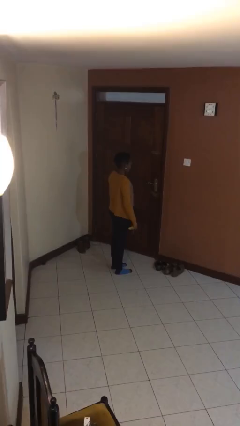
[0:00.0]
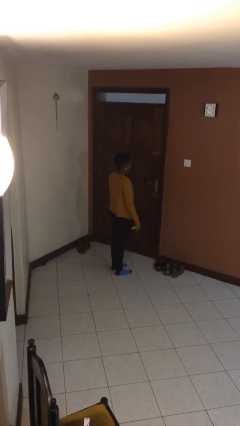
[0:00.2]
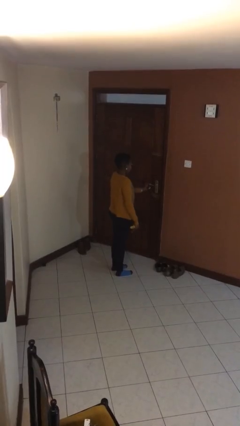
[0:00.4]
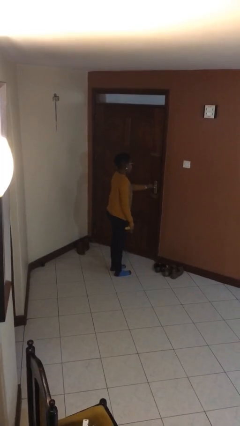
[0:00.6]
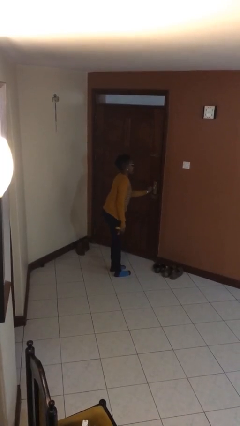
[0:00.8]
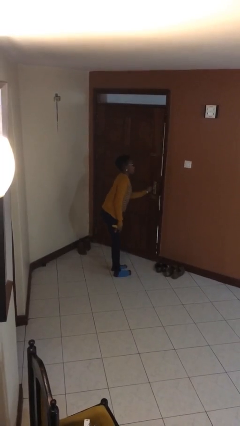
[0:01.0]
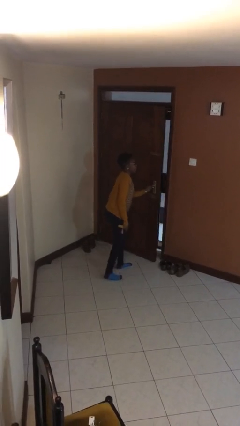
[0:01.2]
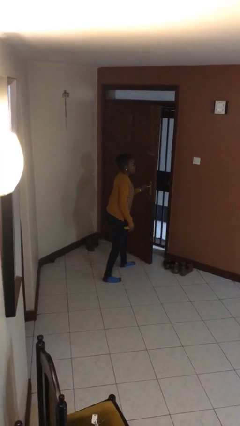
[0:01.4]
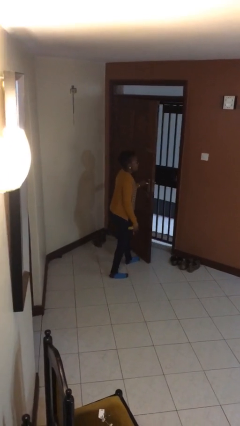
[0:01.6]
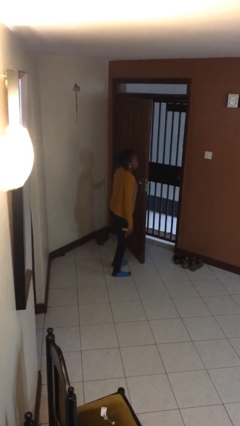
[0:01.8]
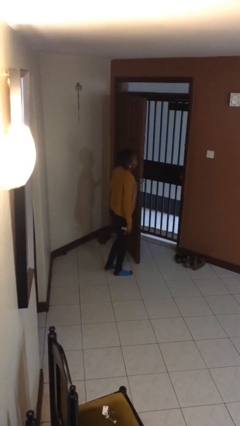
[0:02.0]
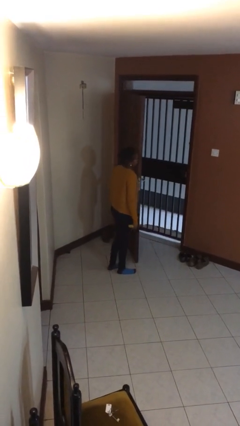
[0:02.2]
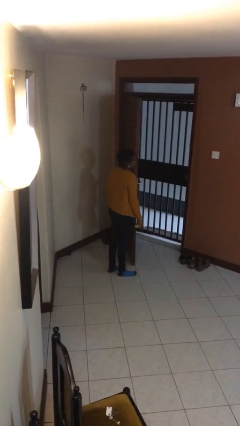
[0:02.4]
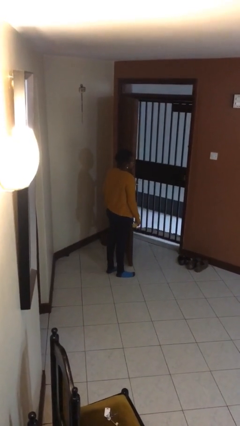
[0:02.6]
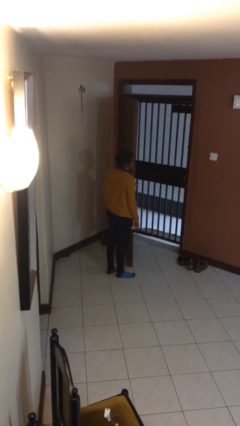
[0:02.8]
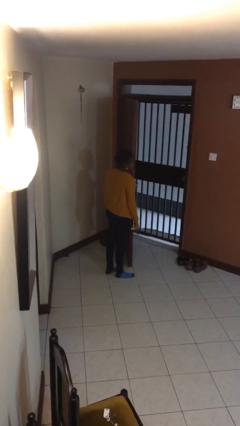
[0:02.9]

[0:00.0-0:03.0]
person opens facility door

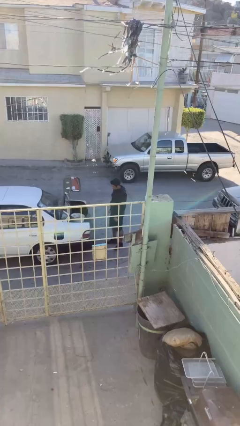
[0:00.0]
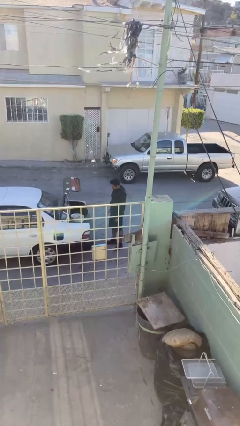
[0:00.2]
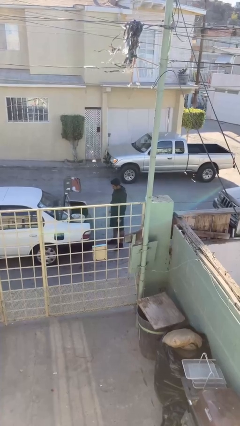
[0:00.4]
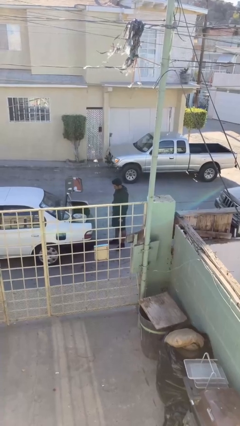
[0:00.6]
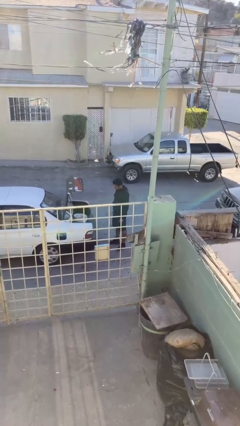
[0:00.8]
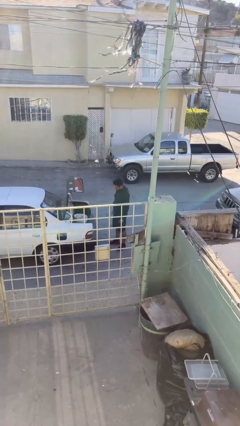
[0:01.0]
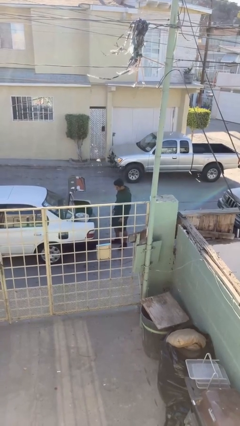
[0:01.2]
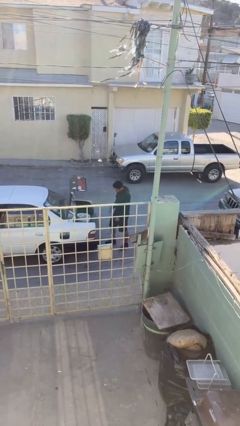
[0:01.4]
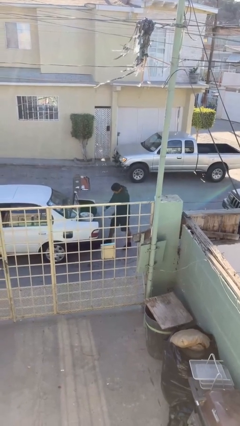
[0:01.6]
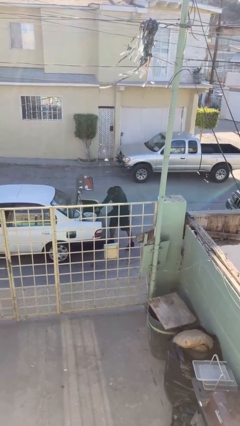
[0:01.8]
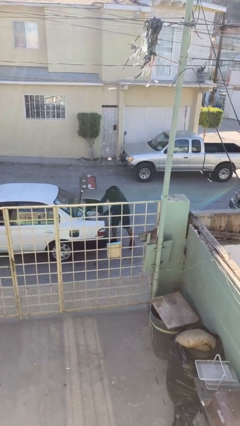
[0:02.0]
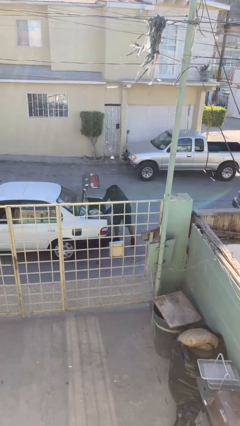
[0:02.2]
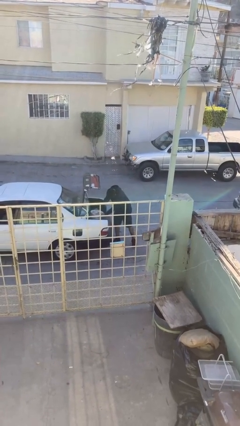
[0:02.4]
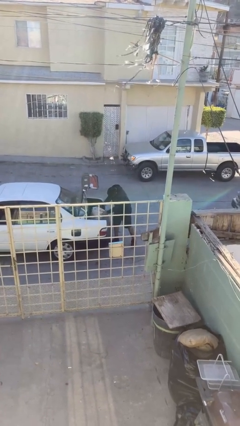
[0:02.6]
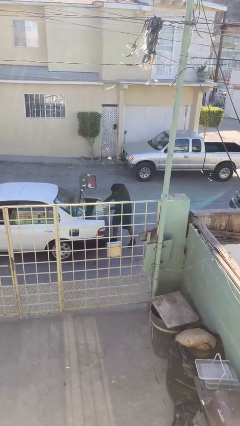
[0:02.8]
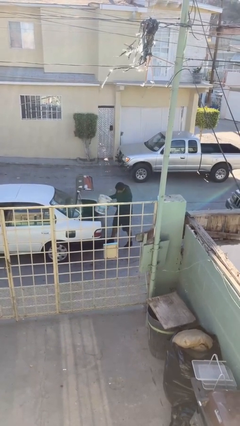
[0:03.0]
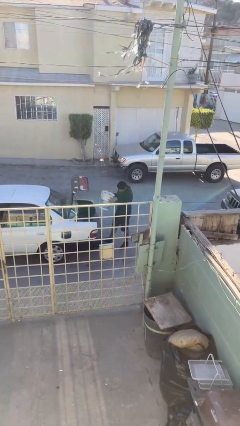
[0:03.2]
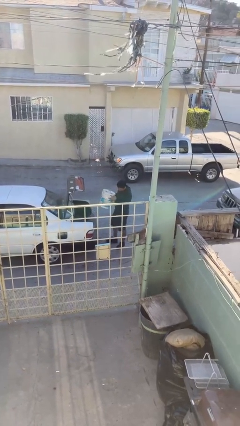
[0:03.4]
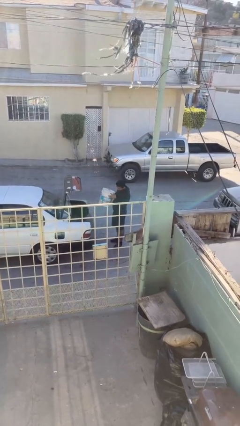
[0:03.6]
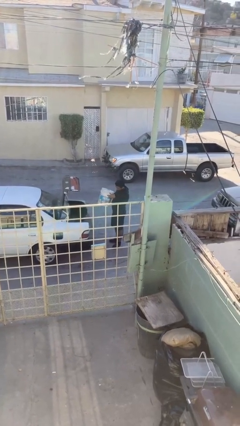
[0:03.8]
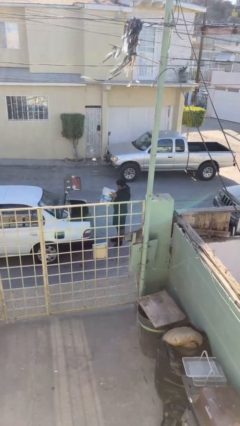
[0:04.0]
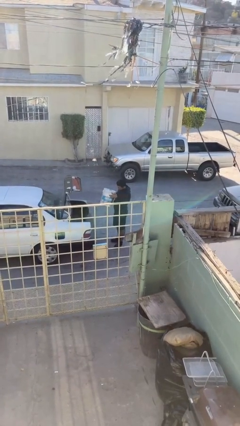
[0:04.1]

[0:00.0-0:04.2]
person unloads car

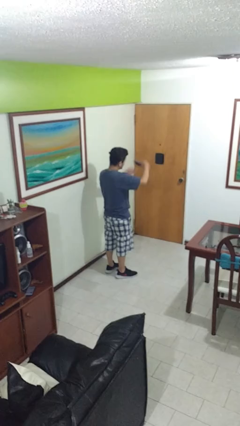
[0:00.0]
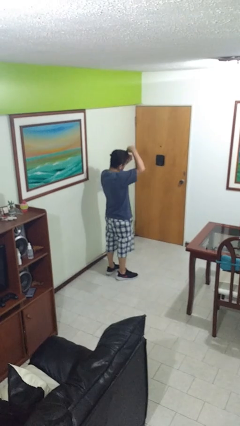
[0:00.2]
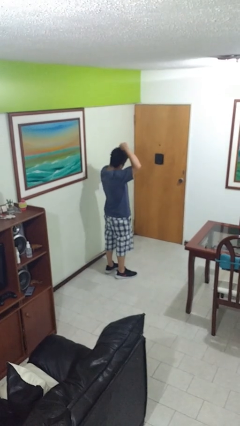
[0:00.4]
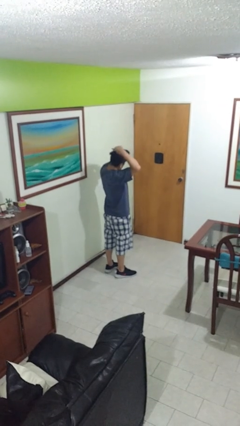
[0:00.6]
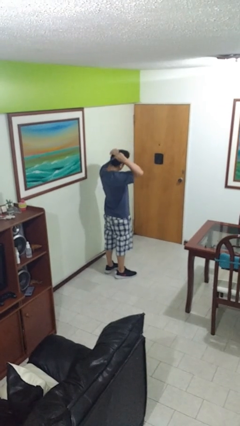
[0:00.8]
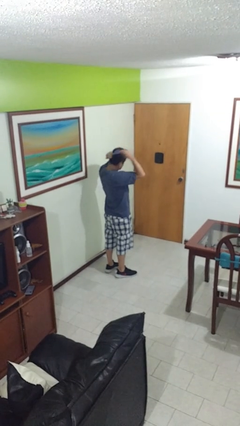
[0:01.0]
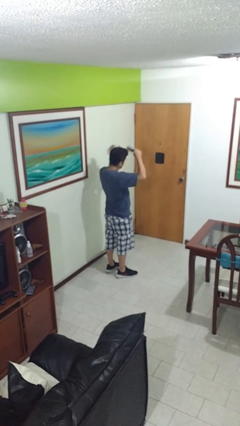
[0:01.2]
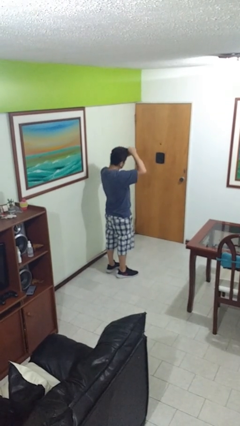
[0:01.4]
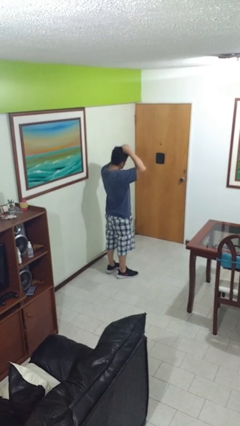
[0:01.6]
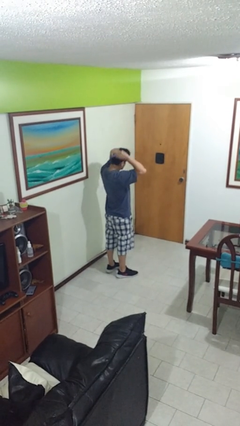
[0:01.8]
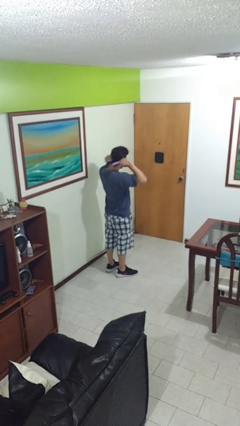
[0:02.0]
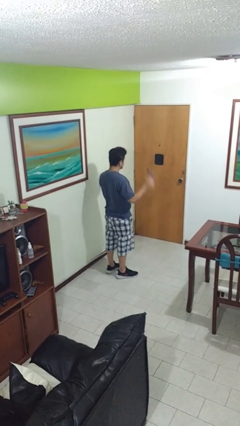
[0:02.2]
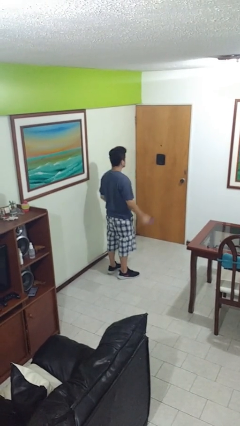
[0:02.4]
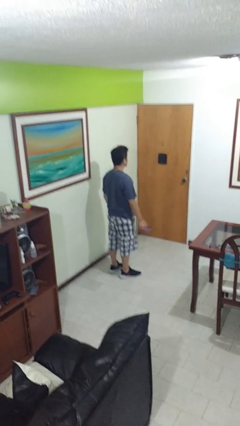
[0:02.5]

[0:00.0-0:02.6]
person brushes hair

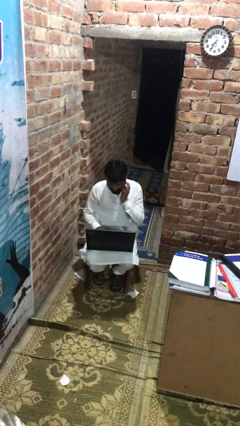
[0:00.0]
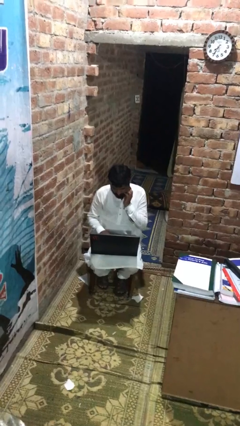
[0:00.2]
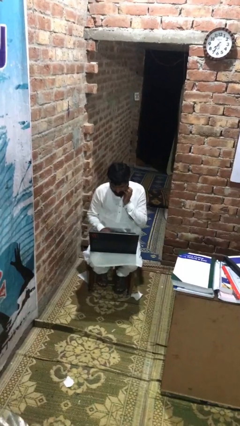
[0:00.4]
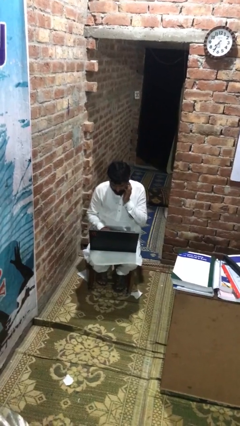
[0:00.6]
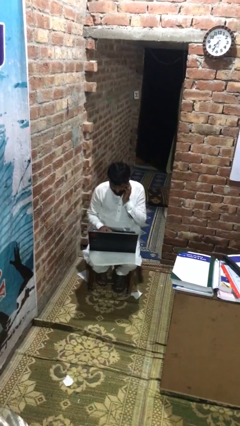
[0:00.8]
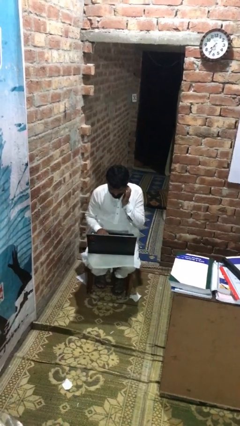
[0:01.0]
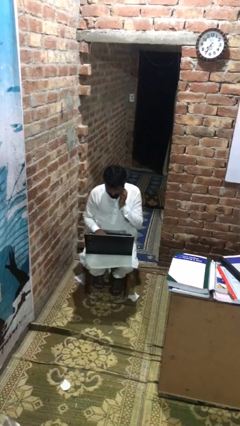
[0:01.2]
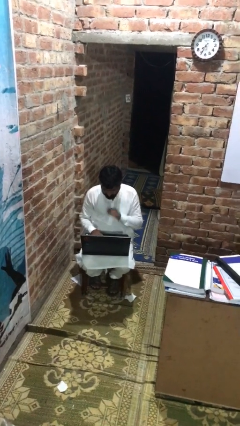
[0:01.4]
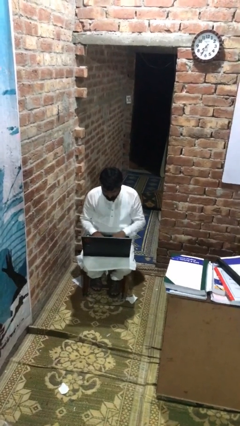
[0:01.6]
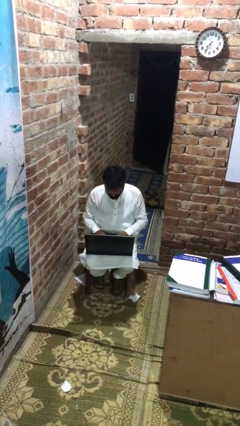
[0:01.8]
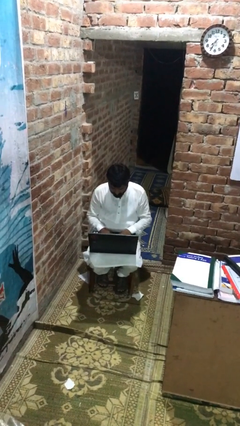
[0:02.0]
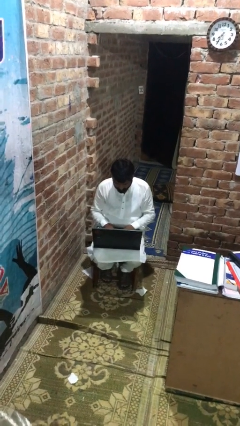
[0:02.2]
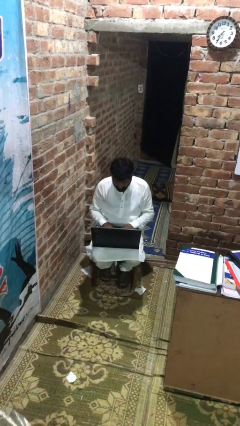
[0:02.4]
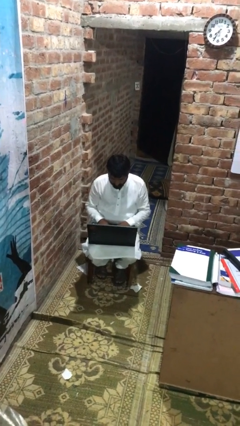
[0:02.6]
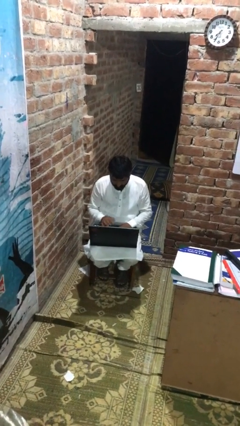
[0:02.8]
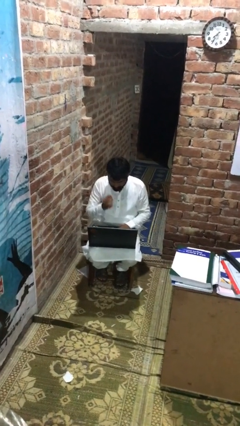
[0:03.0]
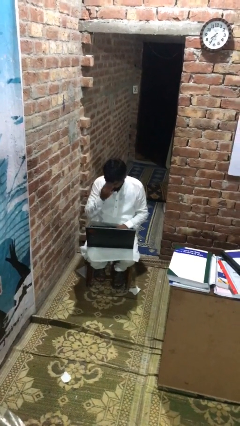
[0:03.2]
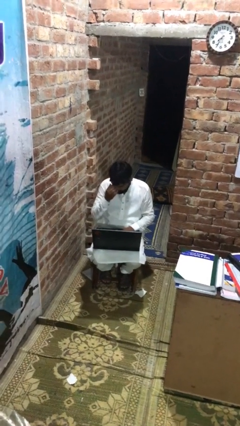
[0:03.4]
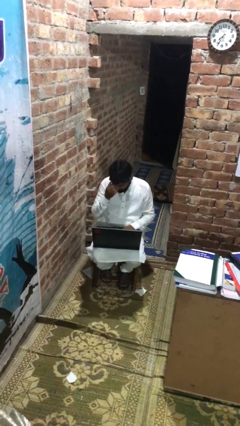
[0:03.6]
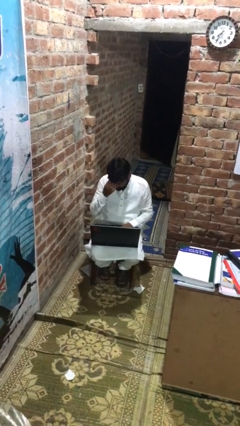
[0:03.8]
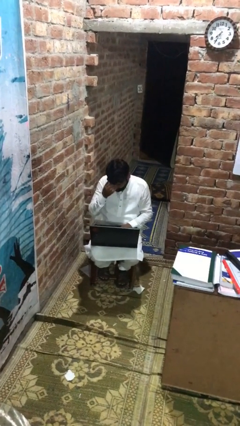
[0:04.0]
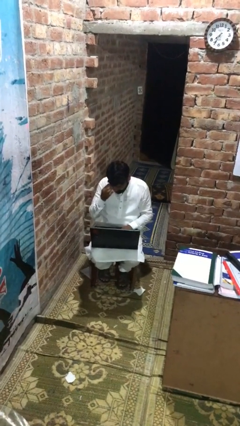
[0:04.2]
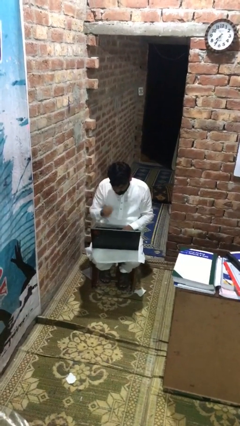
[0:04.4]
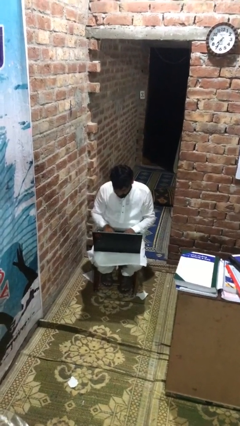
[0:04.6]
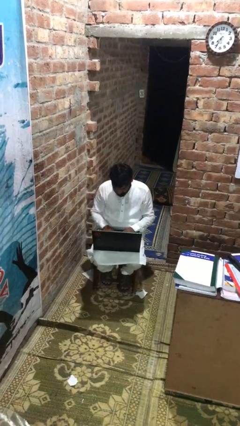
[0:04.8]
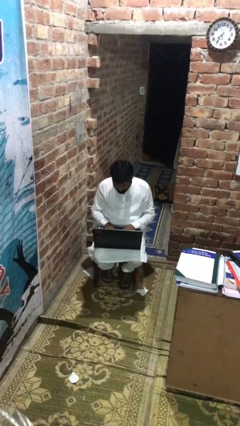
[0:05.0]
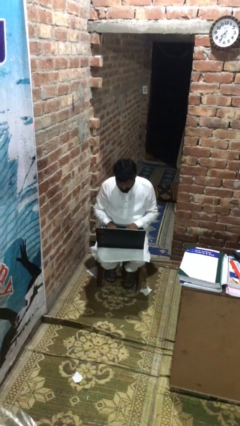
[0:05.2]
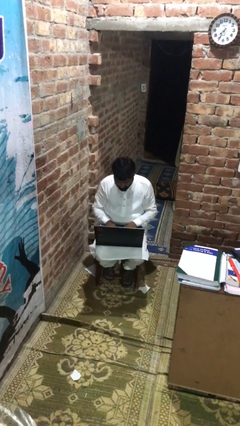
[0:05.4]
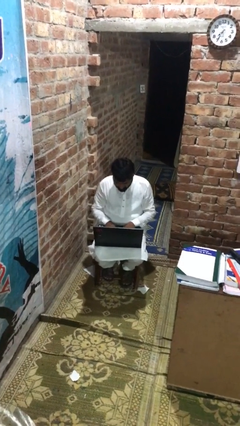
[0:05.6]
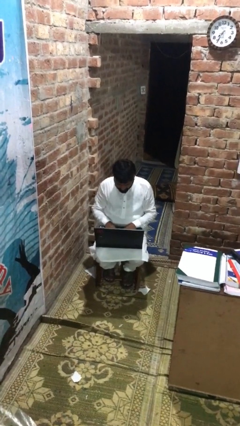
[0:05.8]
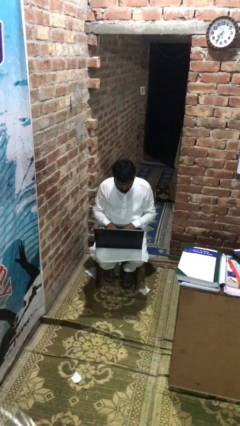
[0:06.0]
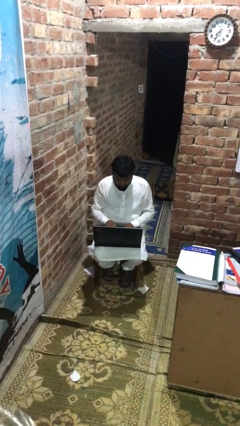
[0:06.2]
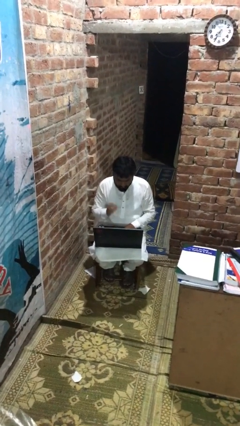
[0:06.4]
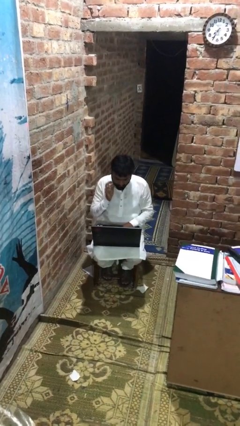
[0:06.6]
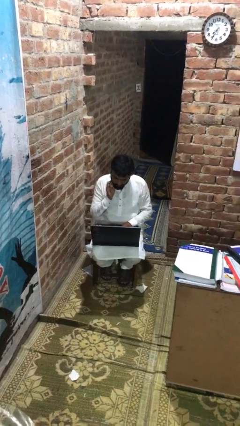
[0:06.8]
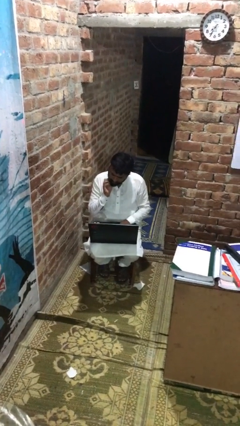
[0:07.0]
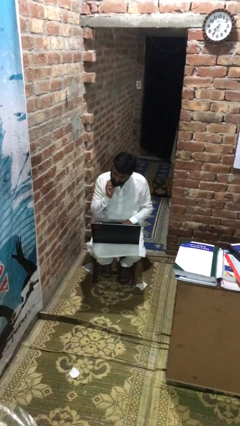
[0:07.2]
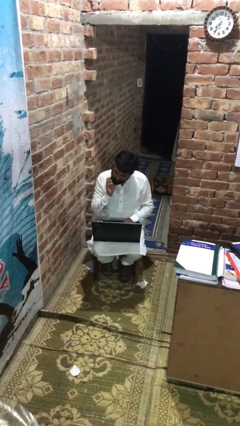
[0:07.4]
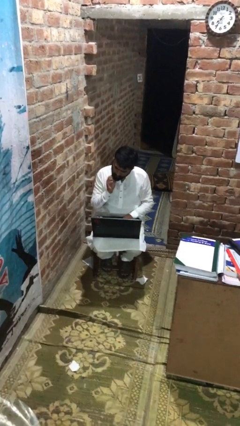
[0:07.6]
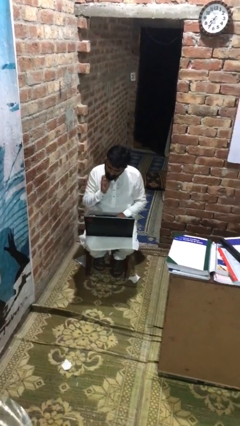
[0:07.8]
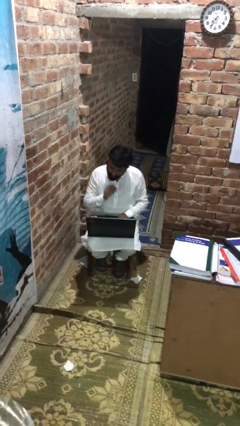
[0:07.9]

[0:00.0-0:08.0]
person interacts with laptop

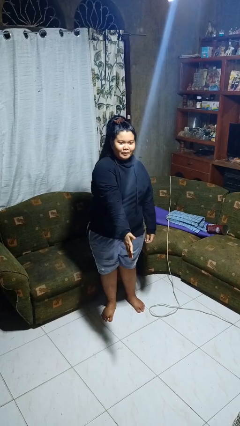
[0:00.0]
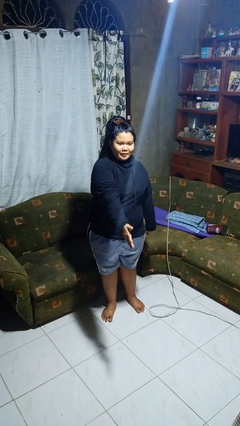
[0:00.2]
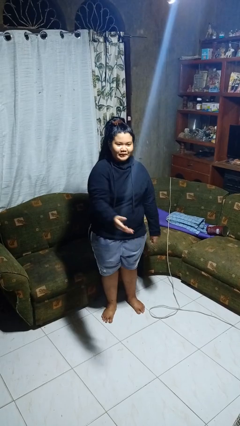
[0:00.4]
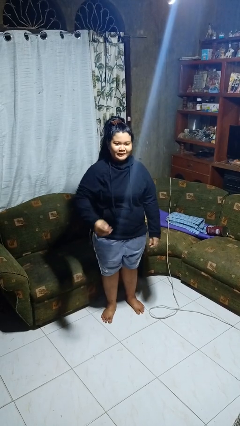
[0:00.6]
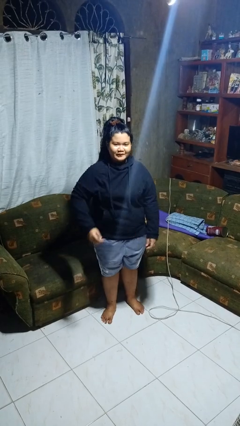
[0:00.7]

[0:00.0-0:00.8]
person karate chop
